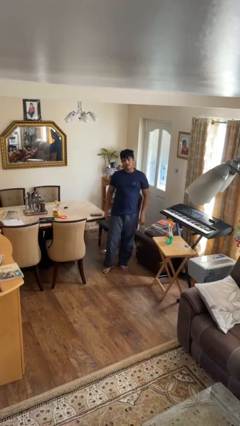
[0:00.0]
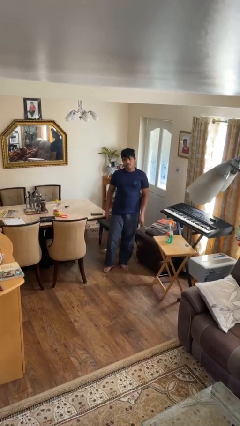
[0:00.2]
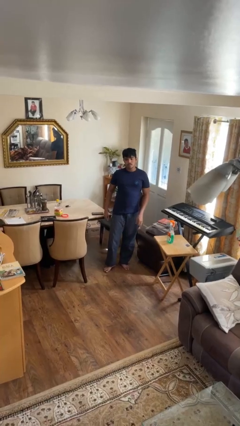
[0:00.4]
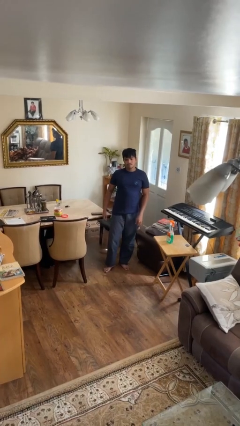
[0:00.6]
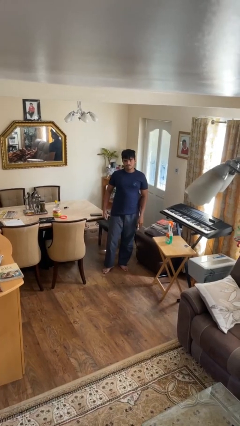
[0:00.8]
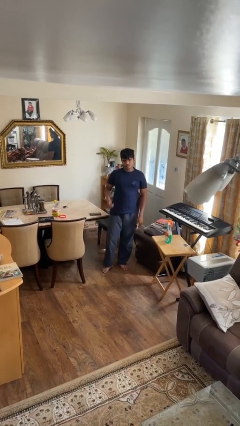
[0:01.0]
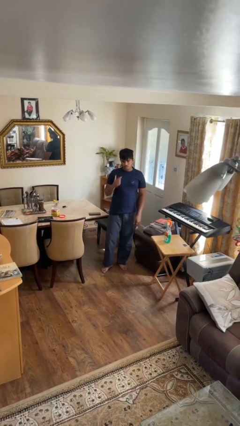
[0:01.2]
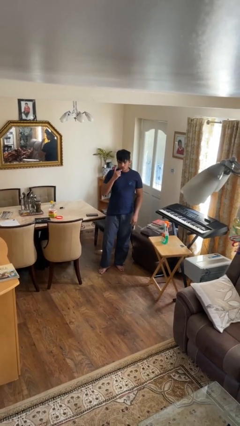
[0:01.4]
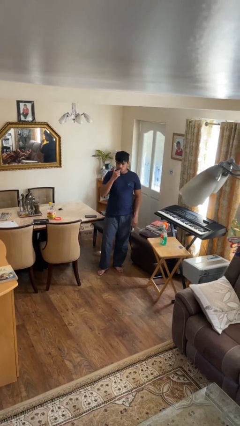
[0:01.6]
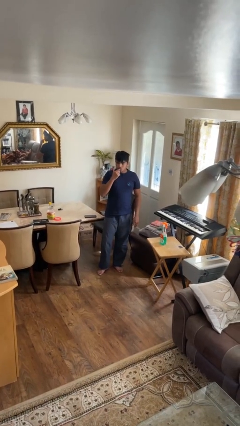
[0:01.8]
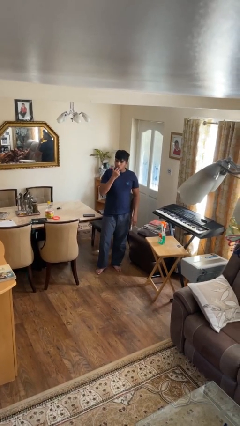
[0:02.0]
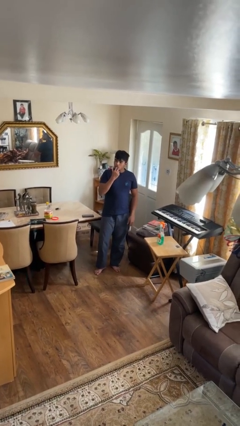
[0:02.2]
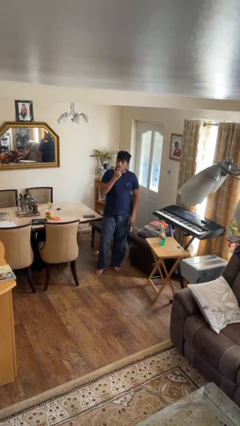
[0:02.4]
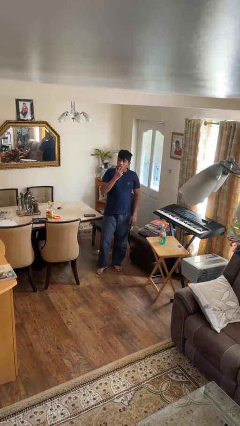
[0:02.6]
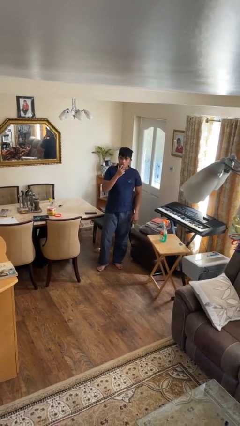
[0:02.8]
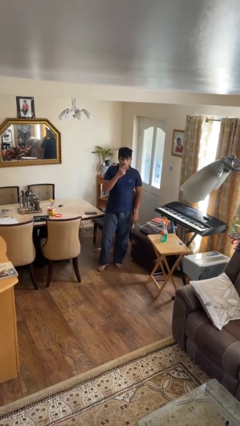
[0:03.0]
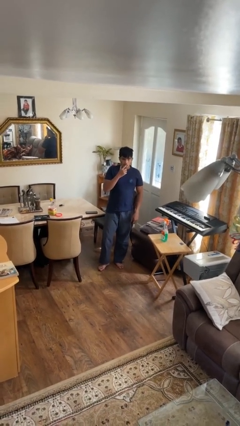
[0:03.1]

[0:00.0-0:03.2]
person licks fingers

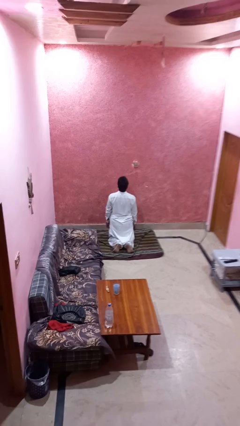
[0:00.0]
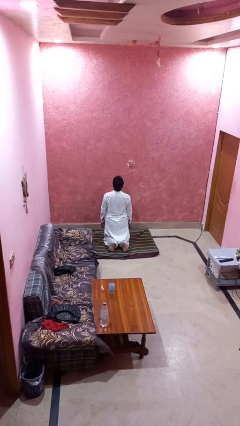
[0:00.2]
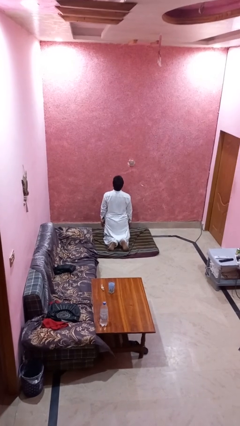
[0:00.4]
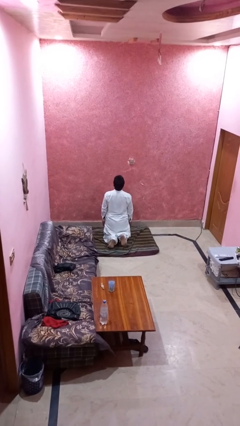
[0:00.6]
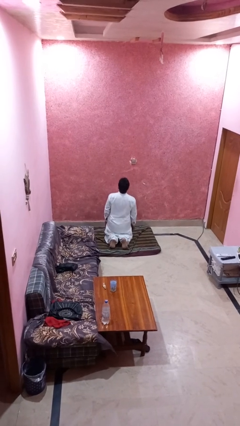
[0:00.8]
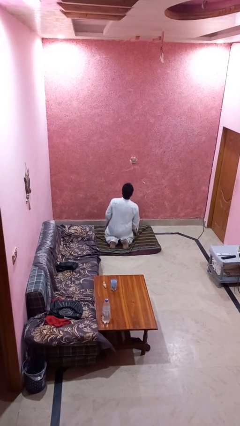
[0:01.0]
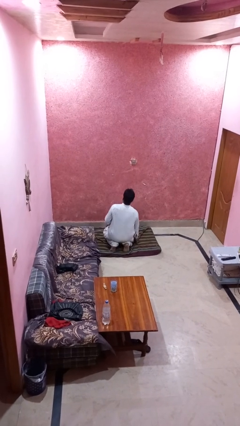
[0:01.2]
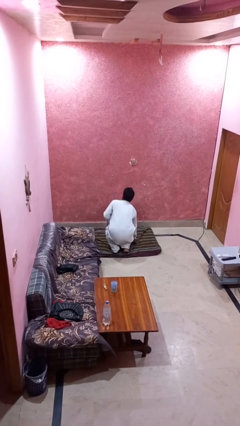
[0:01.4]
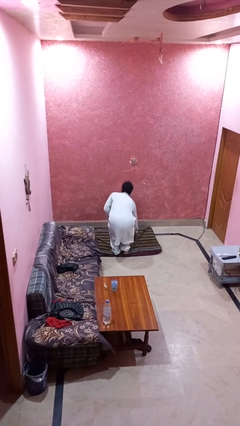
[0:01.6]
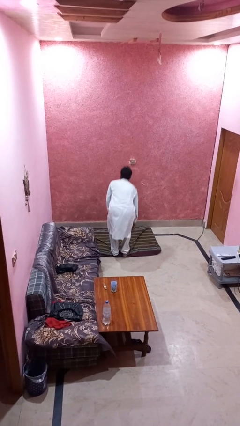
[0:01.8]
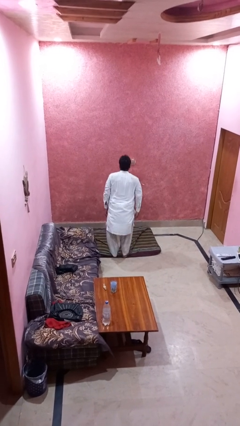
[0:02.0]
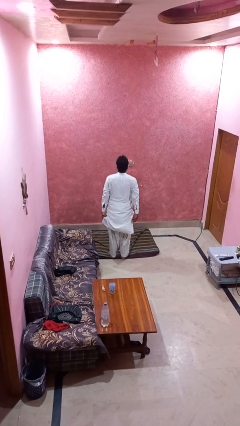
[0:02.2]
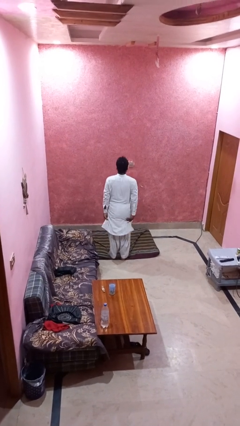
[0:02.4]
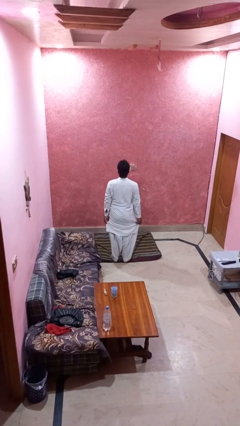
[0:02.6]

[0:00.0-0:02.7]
person stands up from floor

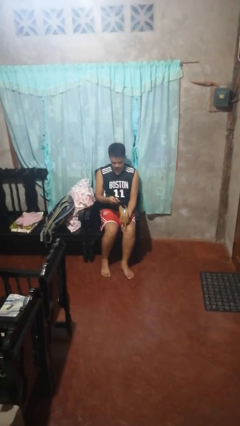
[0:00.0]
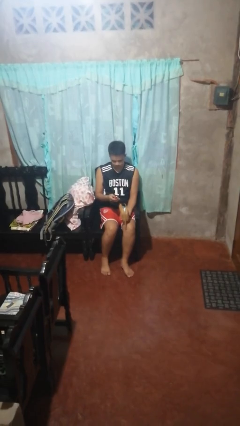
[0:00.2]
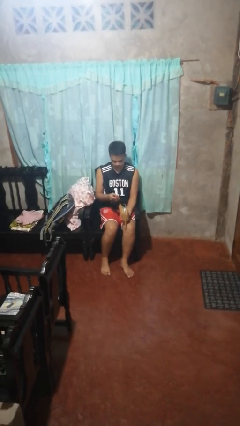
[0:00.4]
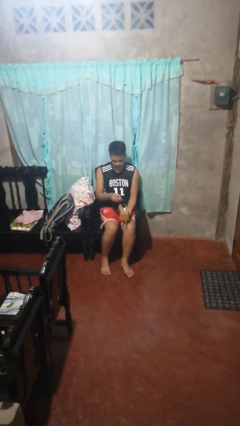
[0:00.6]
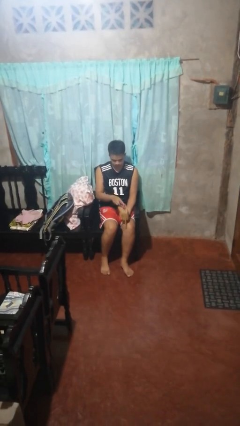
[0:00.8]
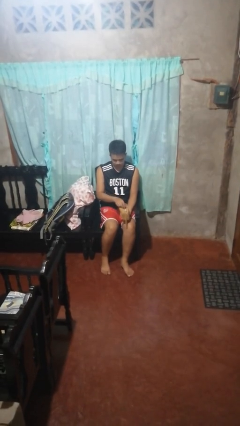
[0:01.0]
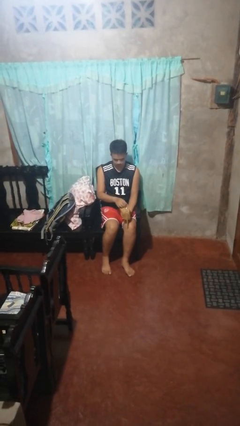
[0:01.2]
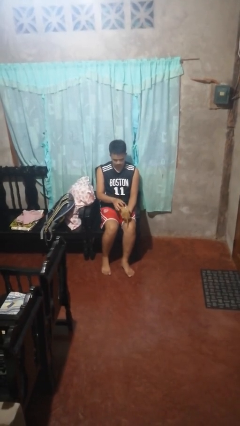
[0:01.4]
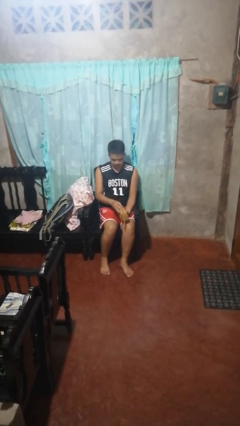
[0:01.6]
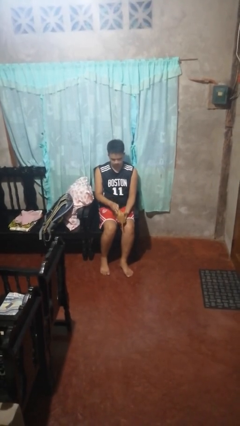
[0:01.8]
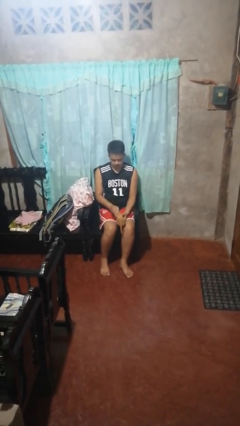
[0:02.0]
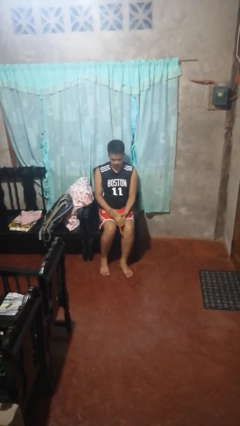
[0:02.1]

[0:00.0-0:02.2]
person puts object into purse

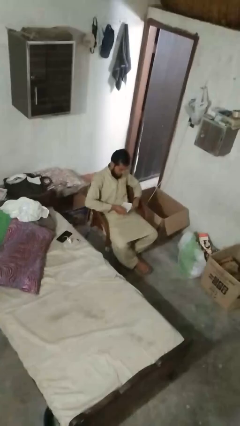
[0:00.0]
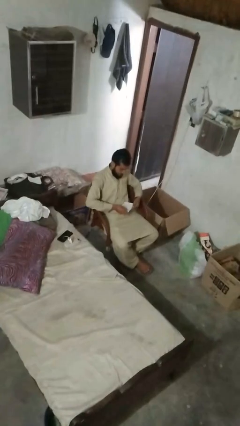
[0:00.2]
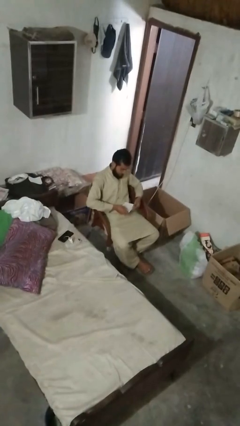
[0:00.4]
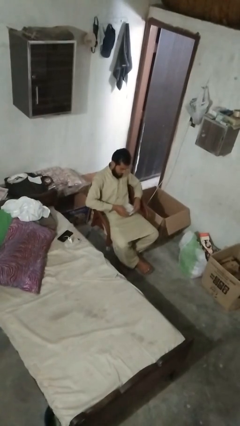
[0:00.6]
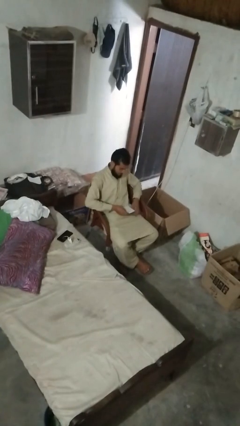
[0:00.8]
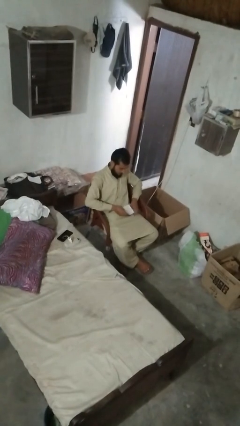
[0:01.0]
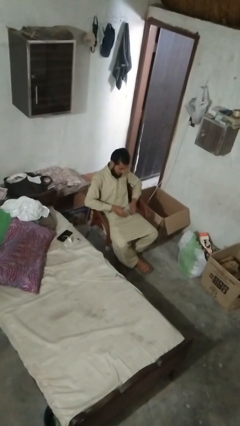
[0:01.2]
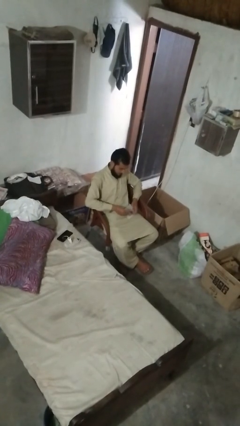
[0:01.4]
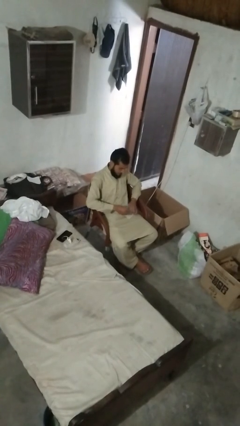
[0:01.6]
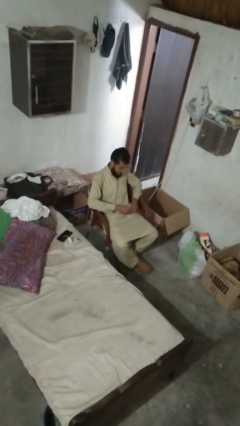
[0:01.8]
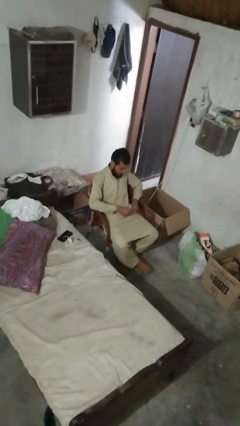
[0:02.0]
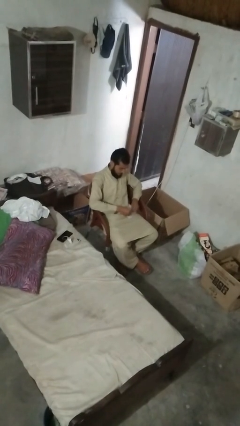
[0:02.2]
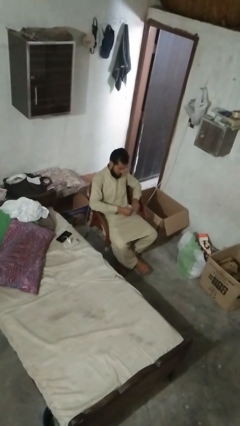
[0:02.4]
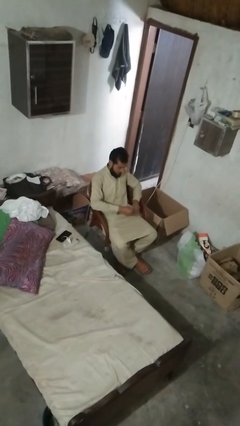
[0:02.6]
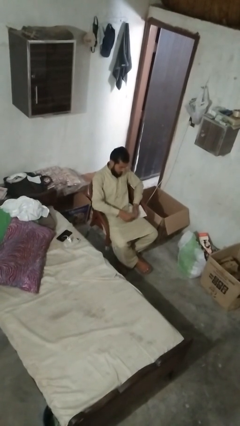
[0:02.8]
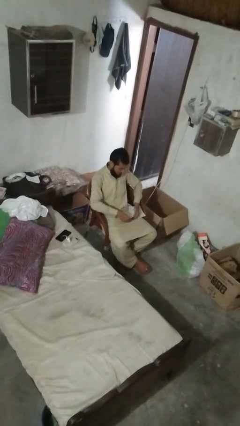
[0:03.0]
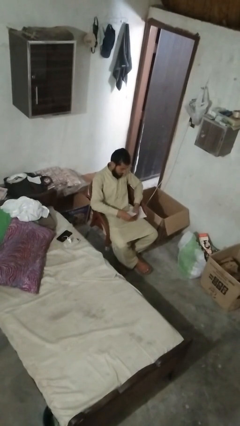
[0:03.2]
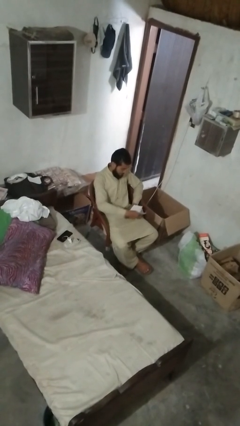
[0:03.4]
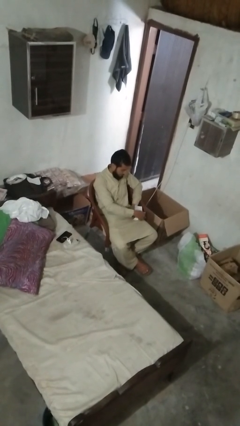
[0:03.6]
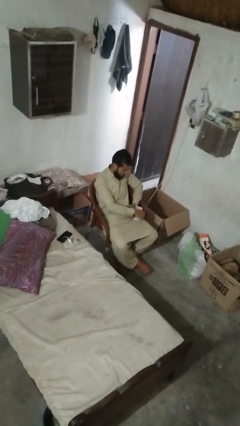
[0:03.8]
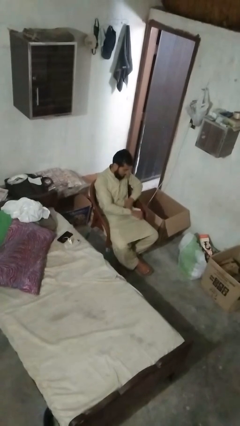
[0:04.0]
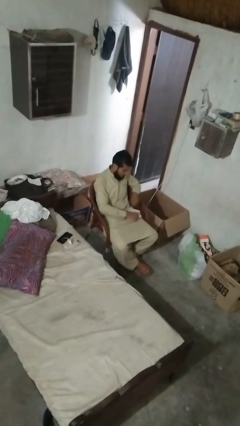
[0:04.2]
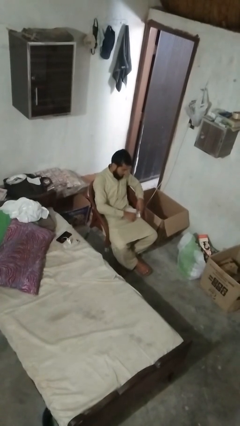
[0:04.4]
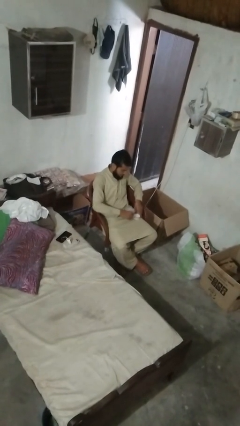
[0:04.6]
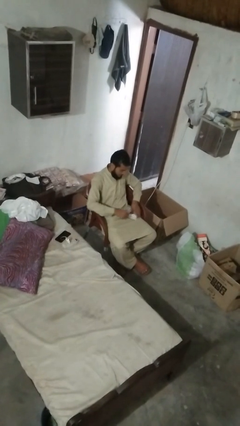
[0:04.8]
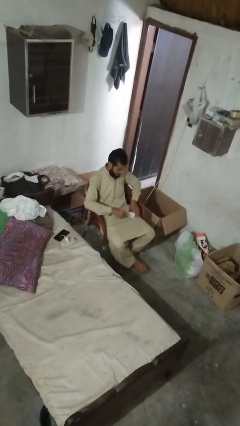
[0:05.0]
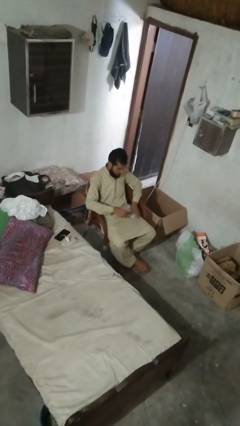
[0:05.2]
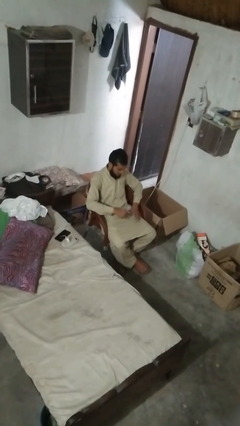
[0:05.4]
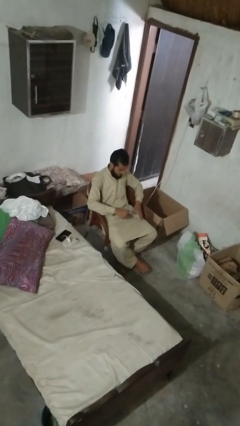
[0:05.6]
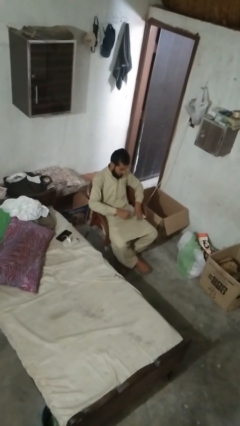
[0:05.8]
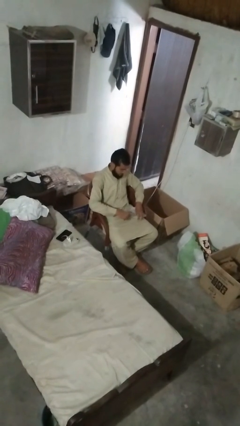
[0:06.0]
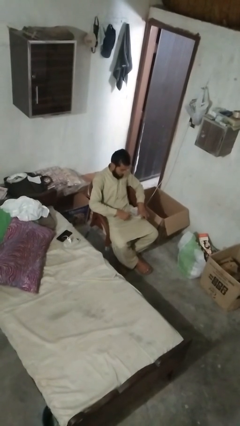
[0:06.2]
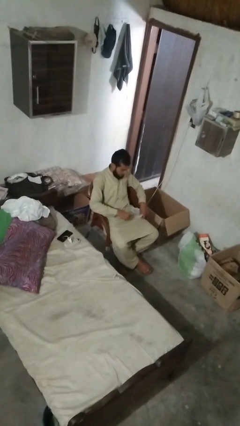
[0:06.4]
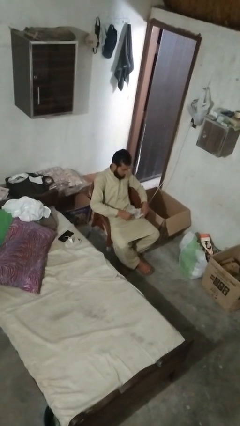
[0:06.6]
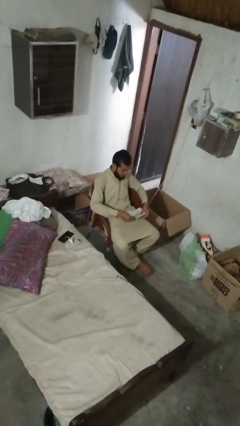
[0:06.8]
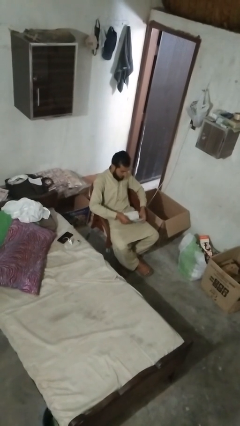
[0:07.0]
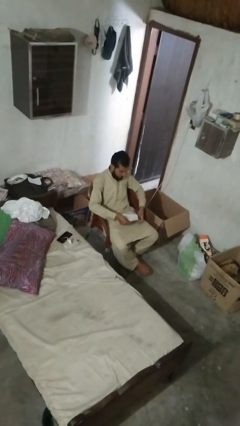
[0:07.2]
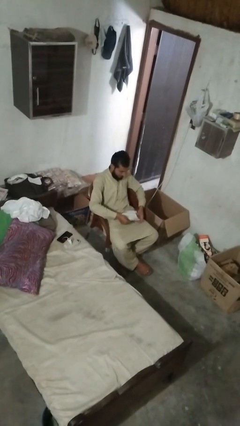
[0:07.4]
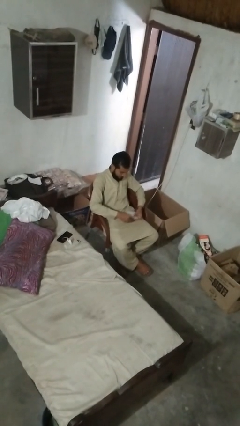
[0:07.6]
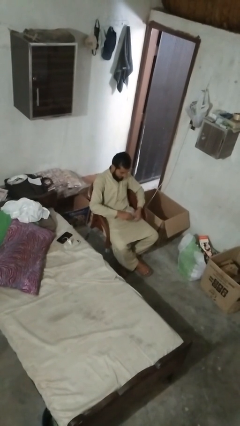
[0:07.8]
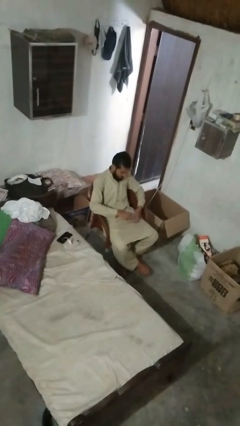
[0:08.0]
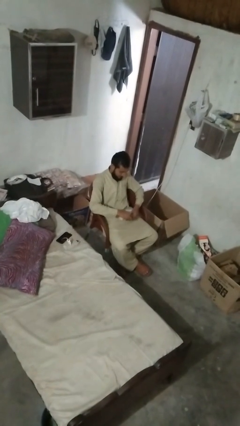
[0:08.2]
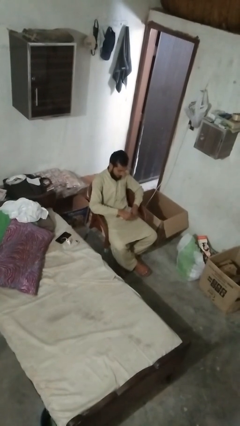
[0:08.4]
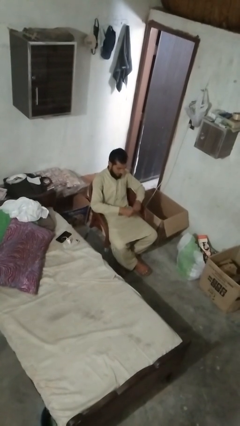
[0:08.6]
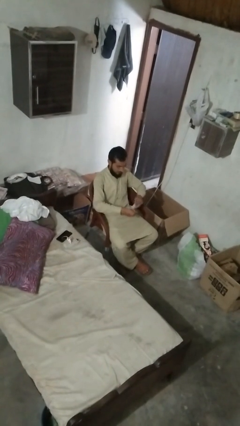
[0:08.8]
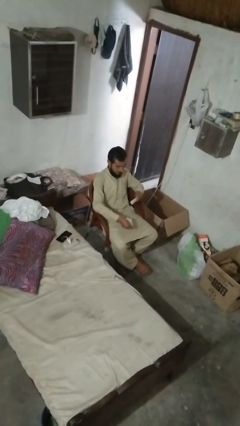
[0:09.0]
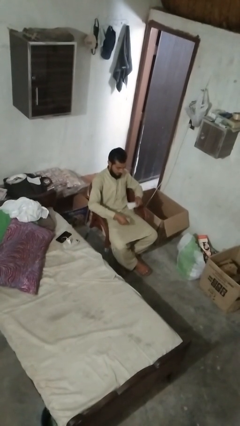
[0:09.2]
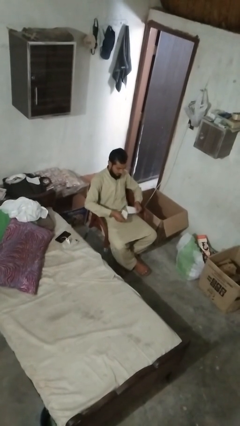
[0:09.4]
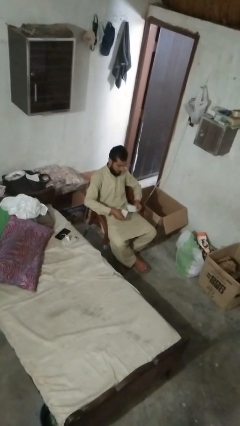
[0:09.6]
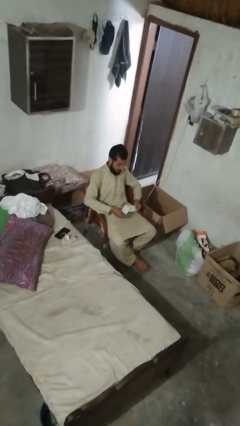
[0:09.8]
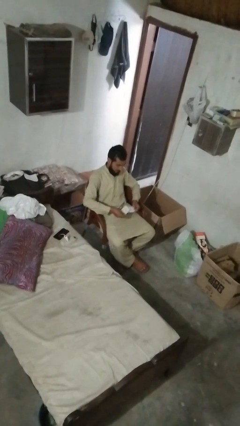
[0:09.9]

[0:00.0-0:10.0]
person tears paper
